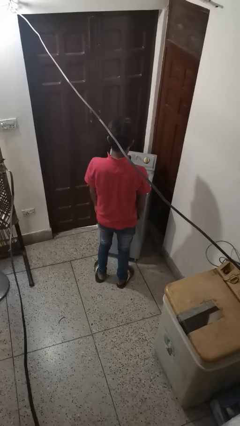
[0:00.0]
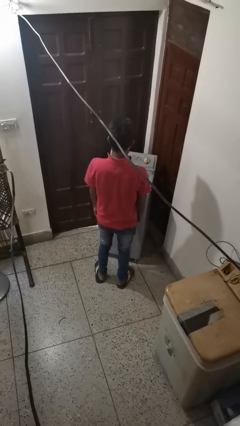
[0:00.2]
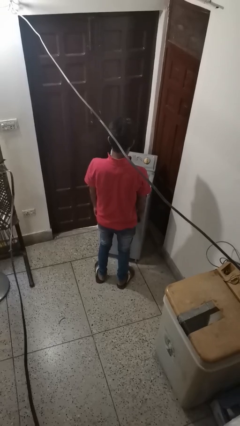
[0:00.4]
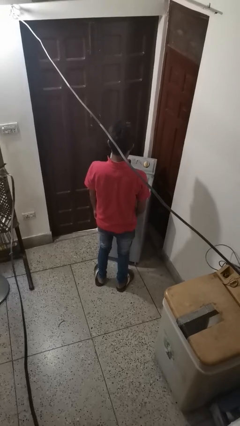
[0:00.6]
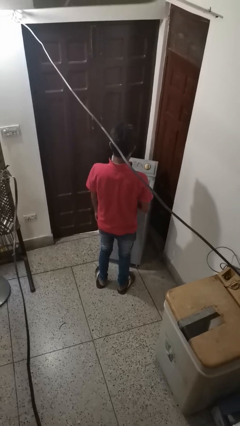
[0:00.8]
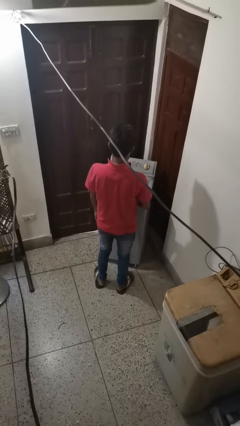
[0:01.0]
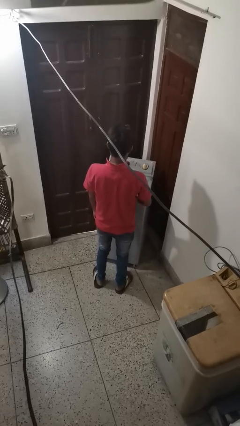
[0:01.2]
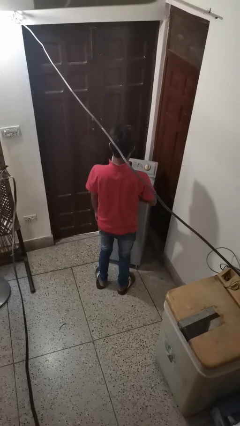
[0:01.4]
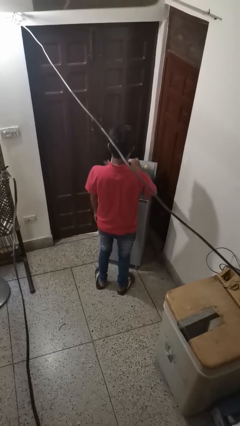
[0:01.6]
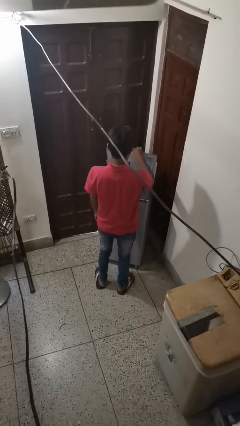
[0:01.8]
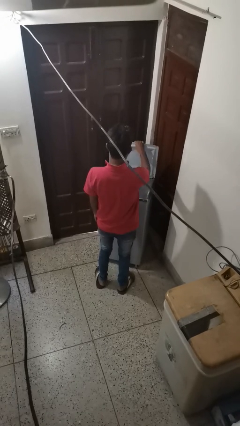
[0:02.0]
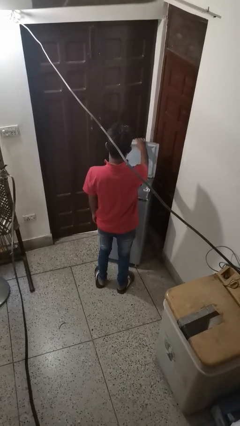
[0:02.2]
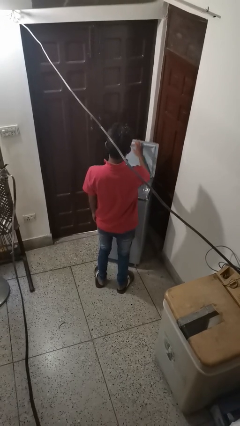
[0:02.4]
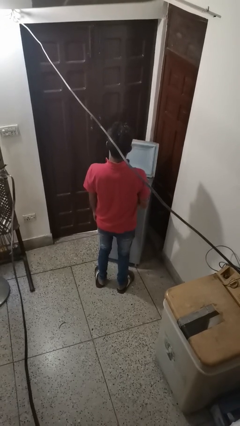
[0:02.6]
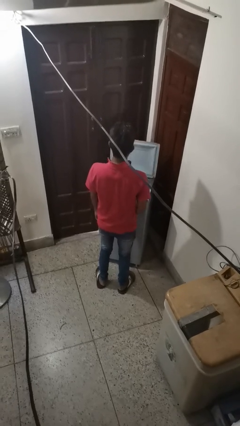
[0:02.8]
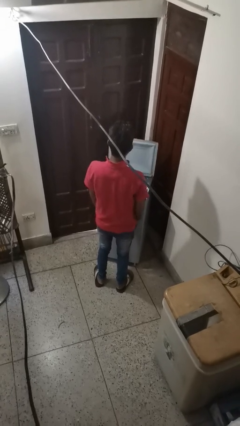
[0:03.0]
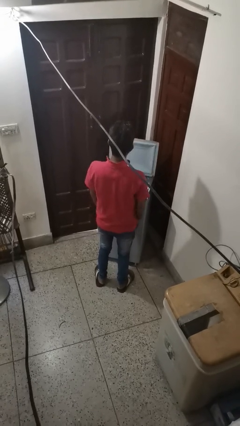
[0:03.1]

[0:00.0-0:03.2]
person opens clothes washer

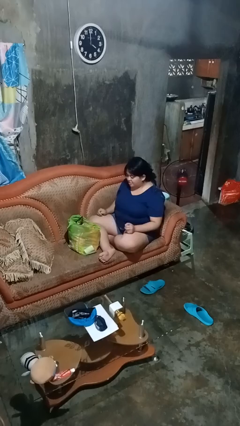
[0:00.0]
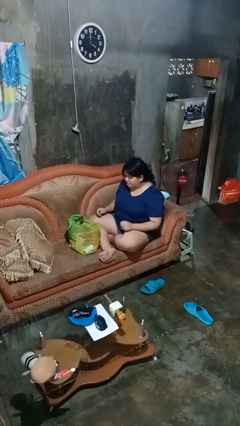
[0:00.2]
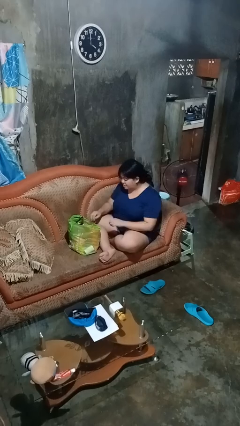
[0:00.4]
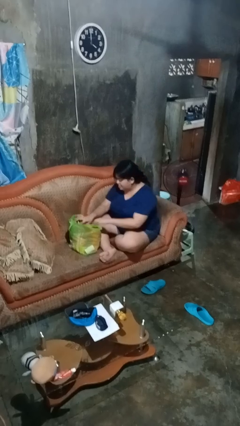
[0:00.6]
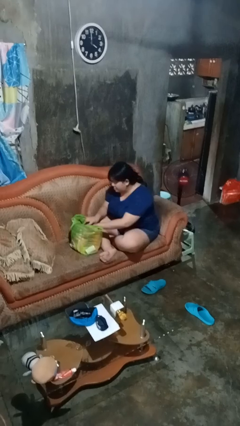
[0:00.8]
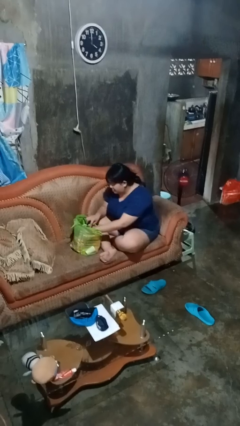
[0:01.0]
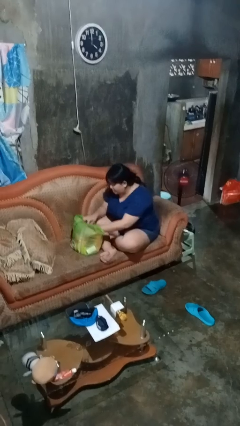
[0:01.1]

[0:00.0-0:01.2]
person searches in bag

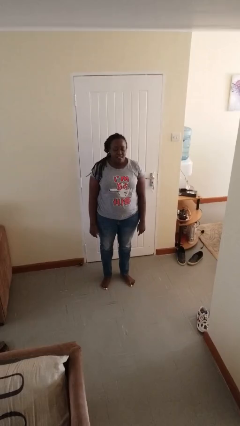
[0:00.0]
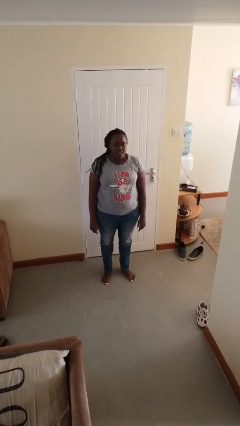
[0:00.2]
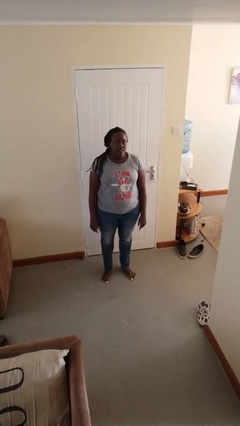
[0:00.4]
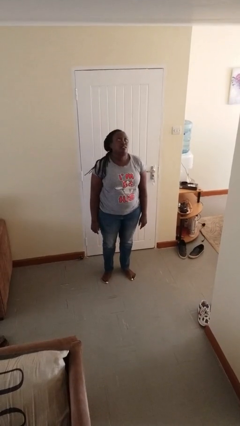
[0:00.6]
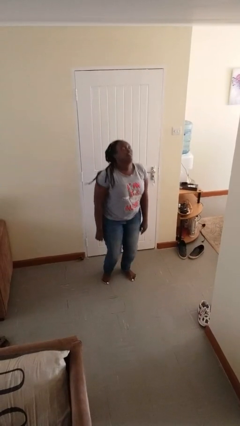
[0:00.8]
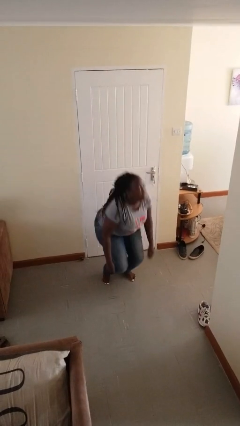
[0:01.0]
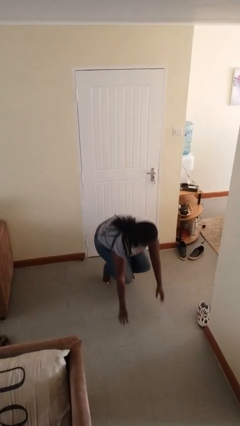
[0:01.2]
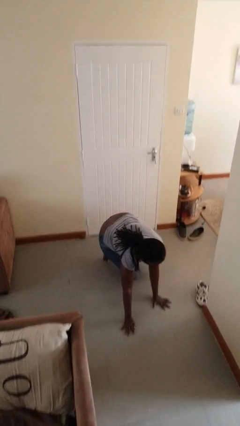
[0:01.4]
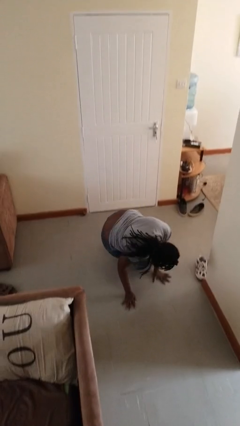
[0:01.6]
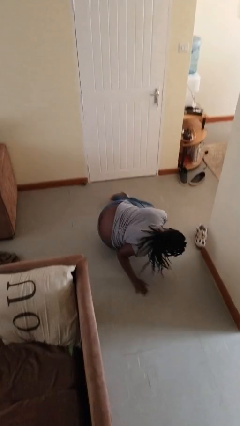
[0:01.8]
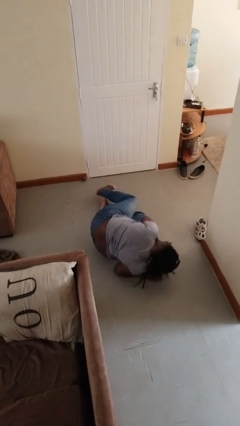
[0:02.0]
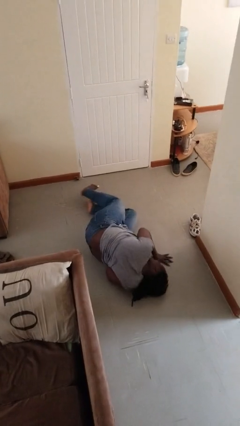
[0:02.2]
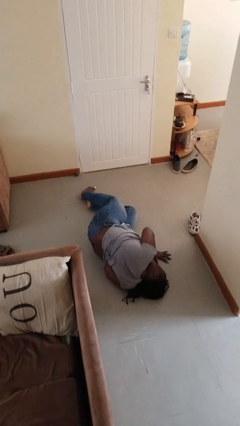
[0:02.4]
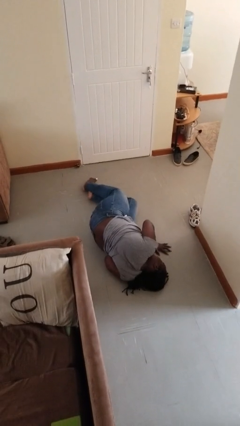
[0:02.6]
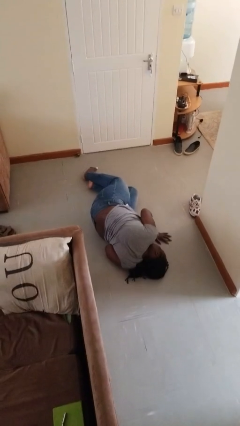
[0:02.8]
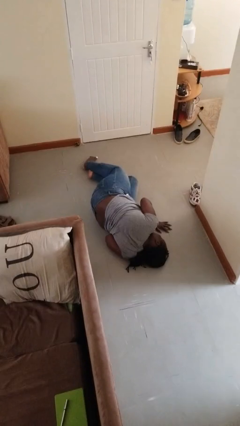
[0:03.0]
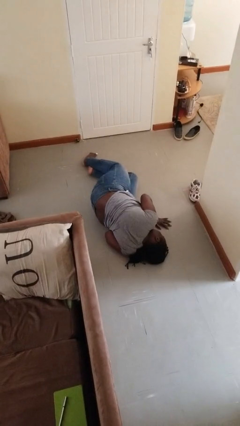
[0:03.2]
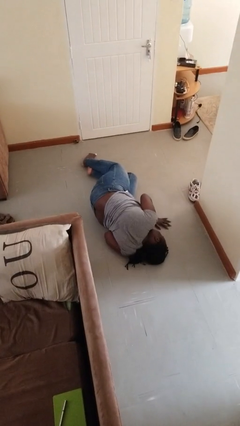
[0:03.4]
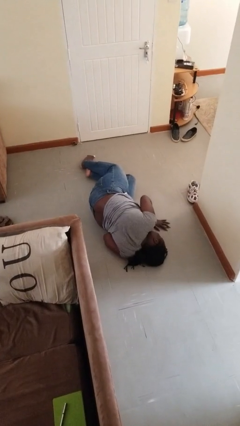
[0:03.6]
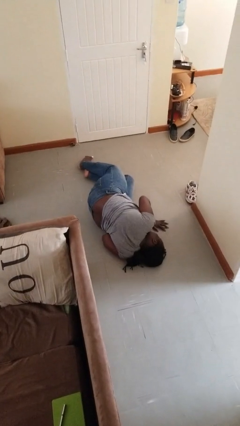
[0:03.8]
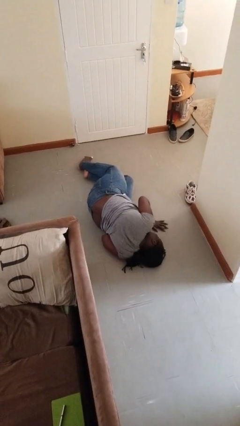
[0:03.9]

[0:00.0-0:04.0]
person falls while standing

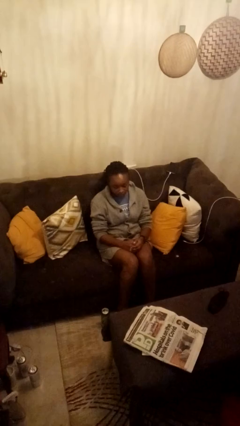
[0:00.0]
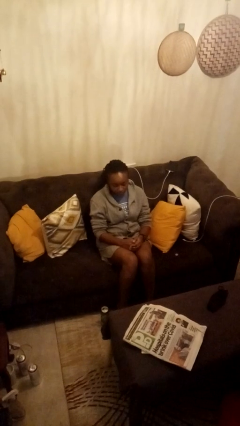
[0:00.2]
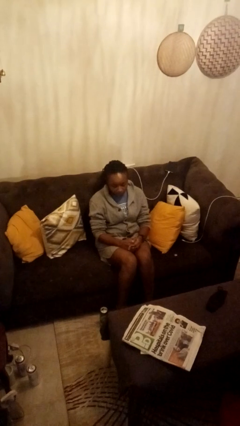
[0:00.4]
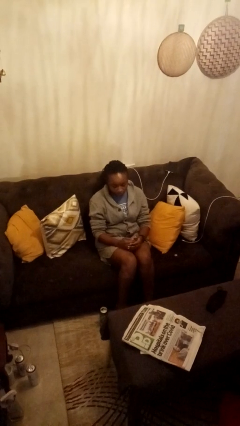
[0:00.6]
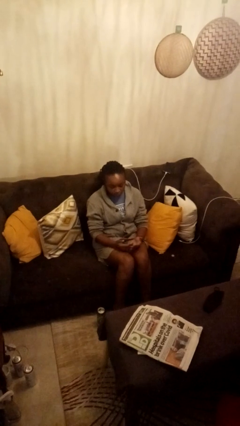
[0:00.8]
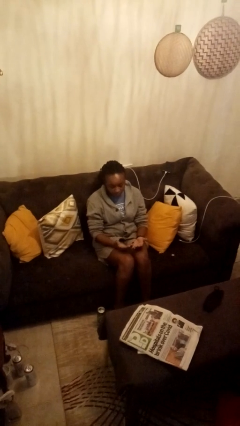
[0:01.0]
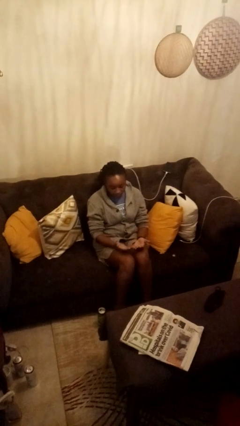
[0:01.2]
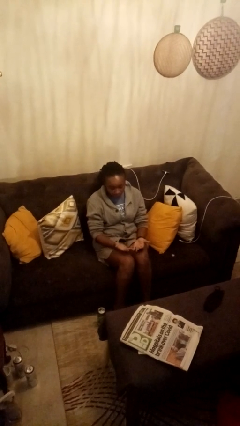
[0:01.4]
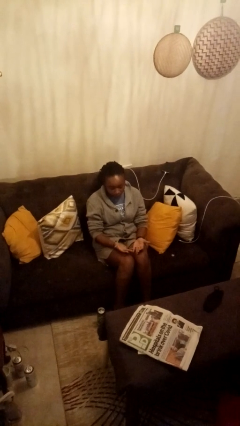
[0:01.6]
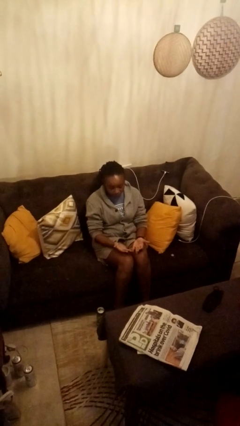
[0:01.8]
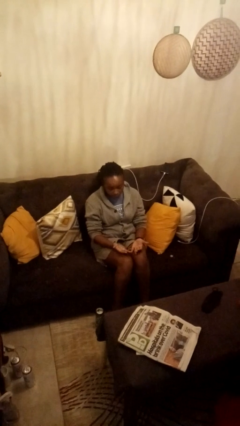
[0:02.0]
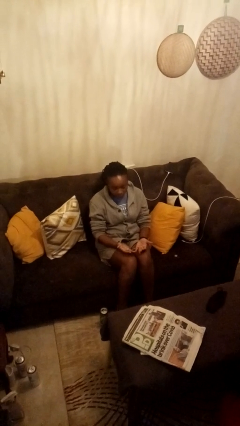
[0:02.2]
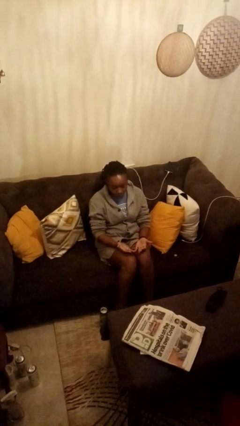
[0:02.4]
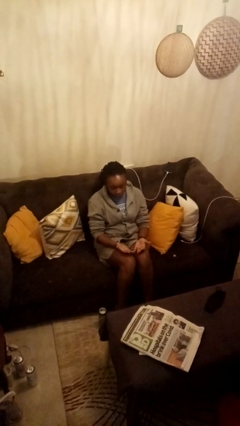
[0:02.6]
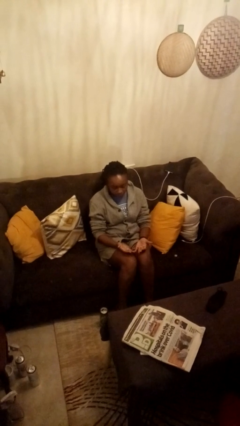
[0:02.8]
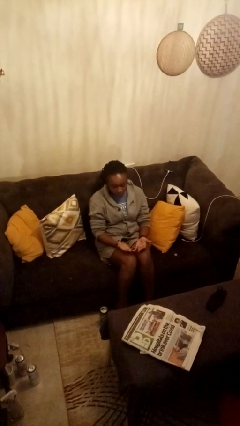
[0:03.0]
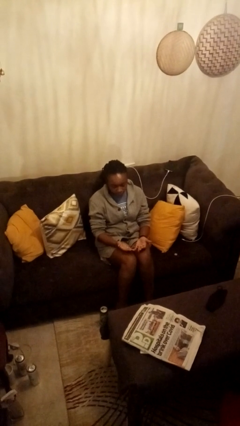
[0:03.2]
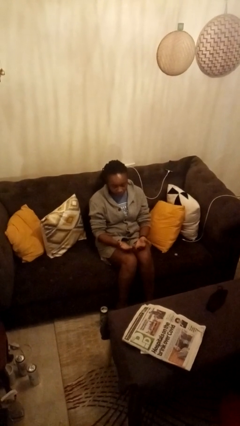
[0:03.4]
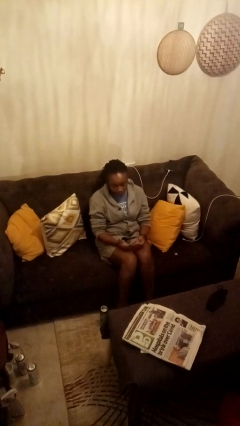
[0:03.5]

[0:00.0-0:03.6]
person looks at hands in lap

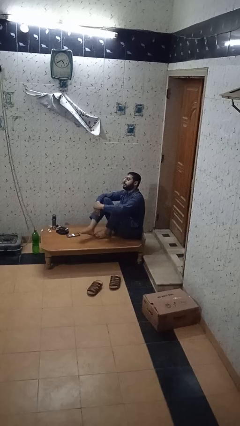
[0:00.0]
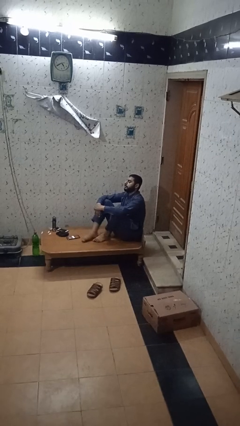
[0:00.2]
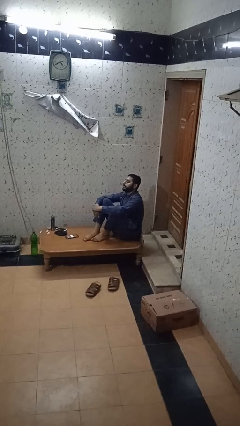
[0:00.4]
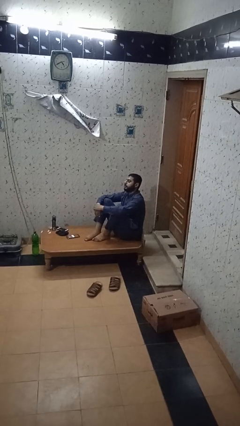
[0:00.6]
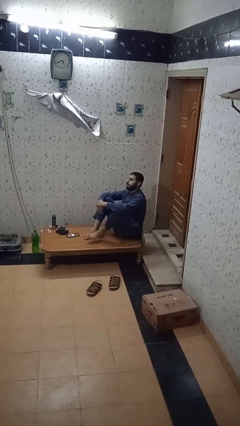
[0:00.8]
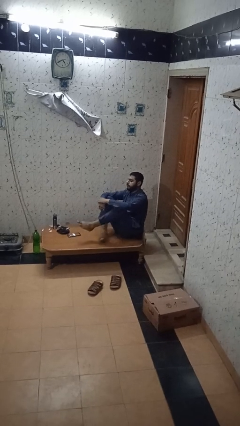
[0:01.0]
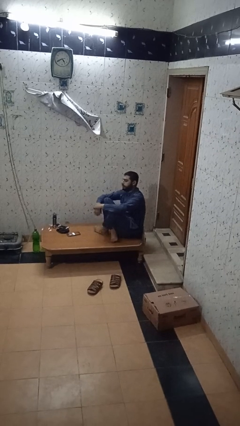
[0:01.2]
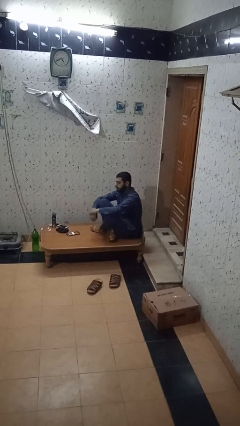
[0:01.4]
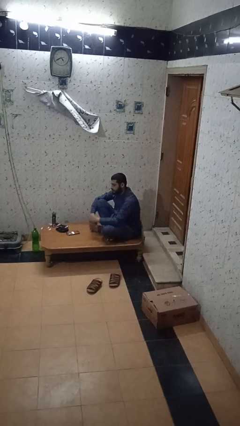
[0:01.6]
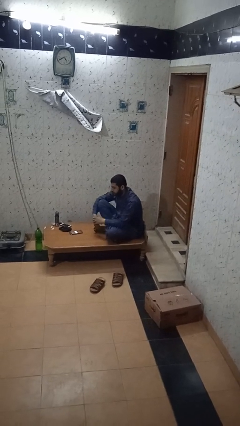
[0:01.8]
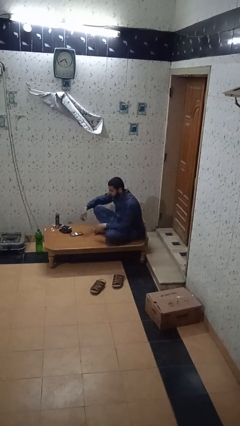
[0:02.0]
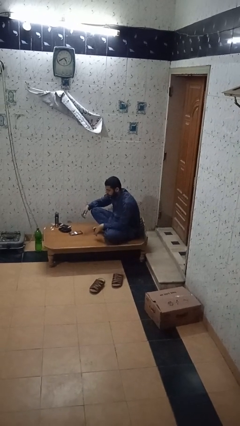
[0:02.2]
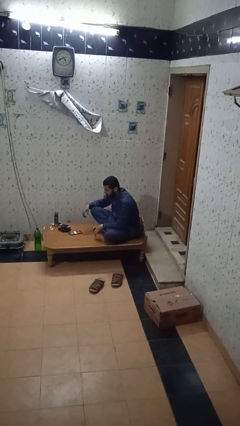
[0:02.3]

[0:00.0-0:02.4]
person crosses legs

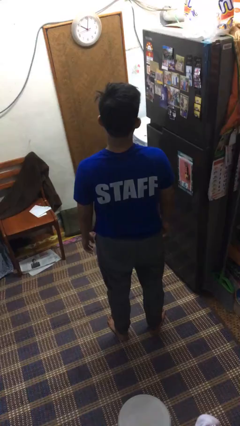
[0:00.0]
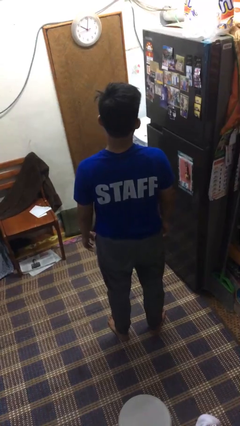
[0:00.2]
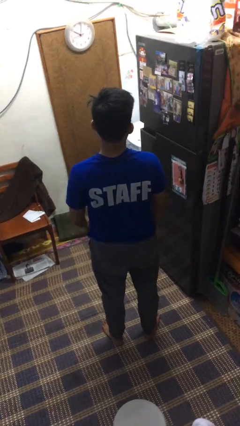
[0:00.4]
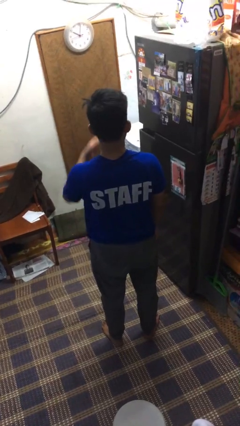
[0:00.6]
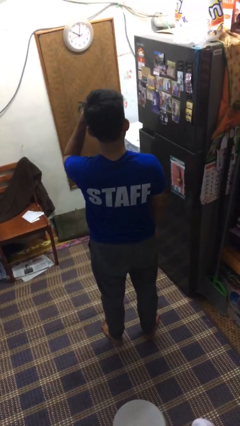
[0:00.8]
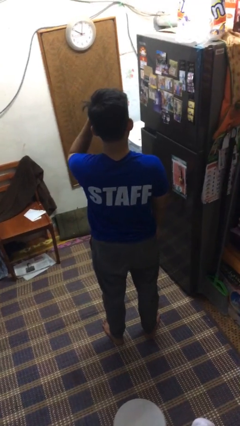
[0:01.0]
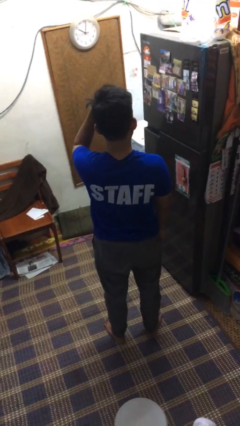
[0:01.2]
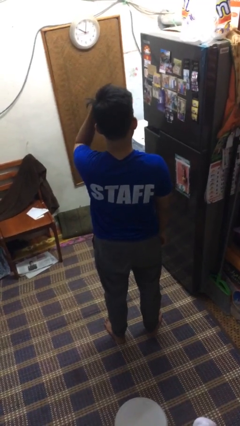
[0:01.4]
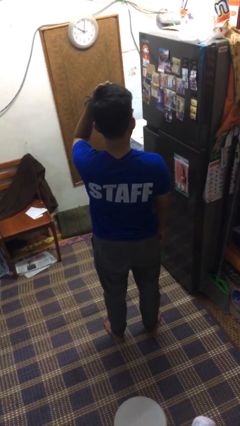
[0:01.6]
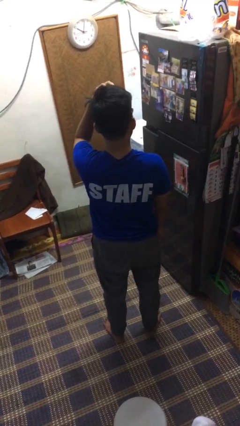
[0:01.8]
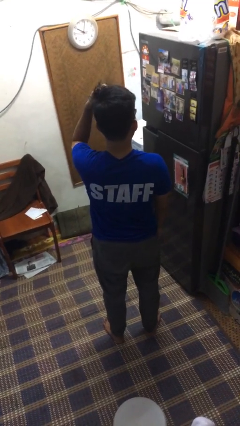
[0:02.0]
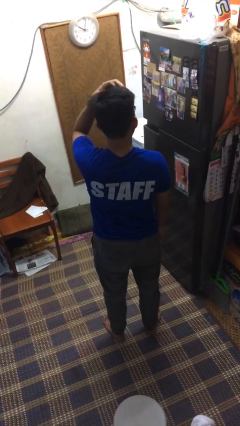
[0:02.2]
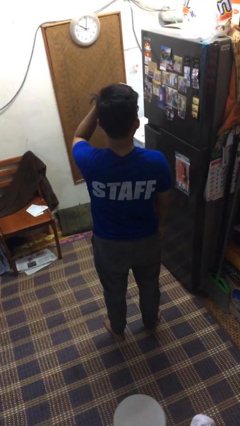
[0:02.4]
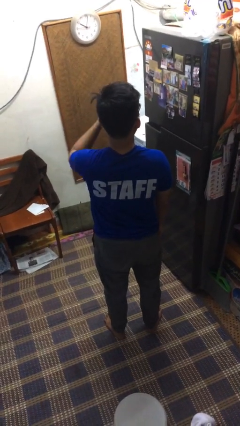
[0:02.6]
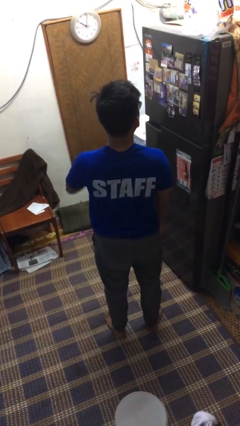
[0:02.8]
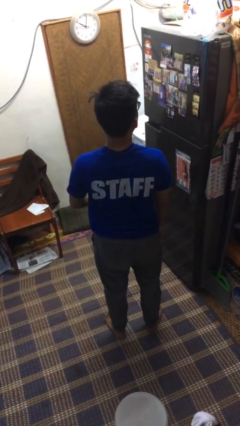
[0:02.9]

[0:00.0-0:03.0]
person scratches face

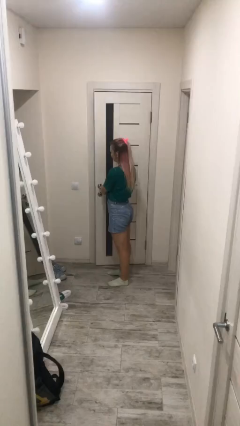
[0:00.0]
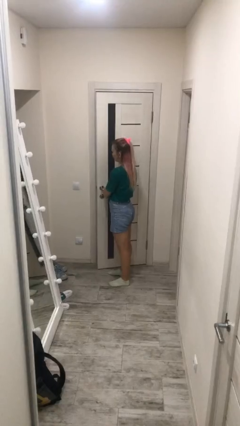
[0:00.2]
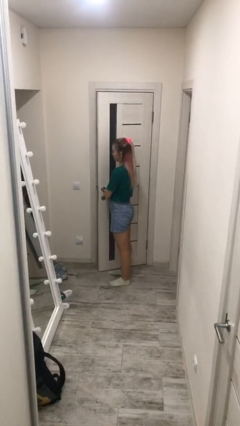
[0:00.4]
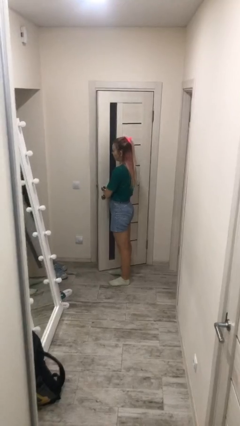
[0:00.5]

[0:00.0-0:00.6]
person opens facility door
